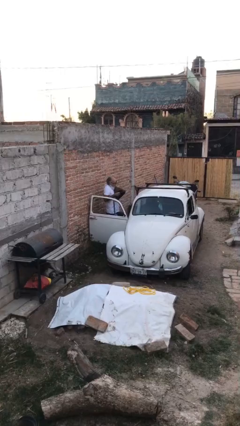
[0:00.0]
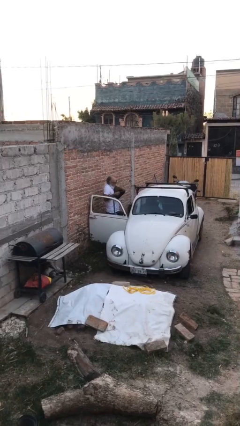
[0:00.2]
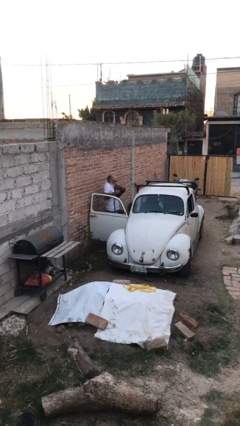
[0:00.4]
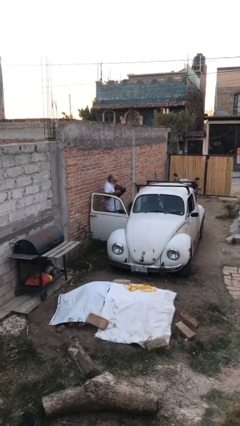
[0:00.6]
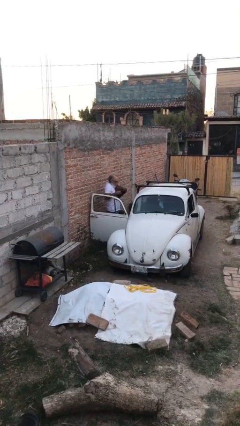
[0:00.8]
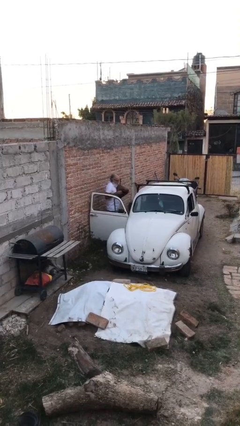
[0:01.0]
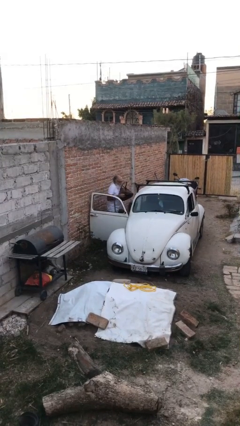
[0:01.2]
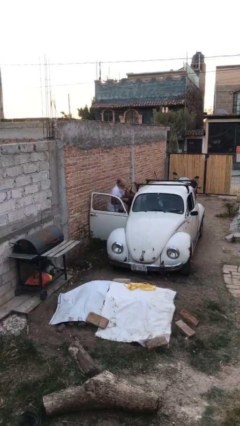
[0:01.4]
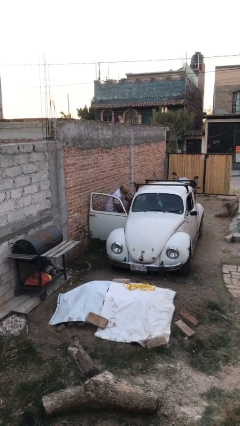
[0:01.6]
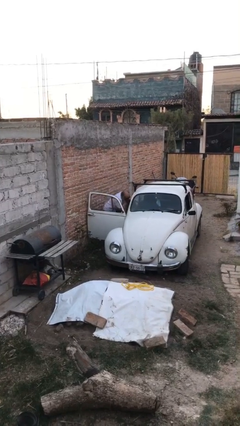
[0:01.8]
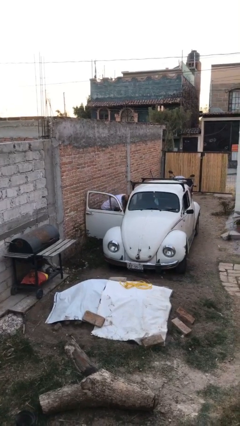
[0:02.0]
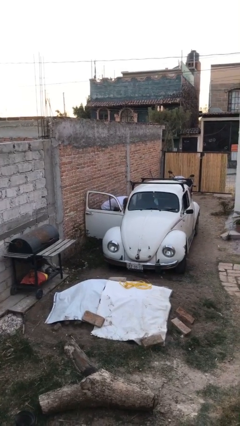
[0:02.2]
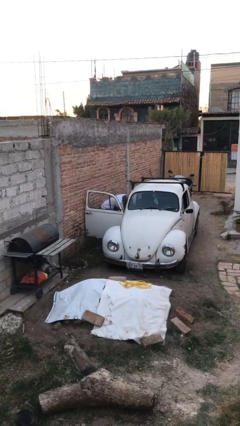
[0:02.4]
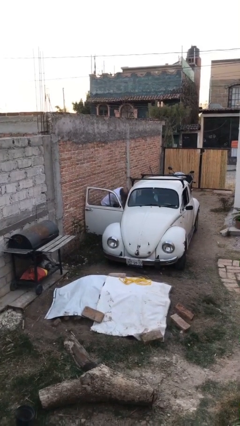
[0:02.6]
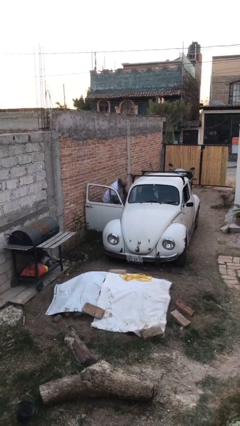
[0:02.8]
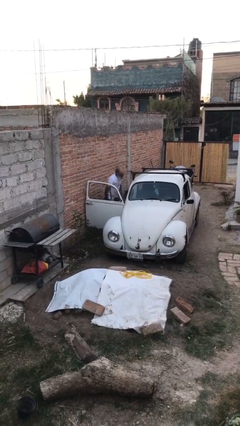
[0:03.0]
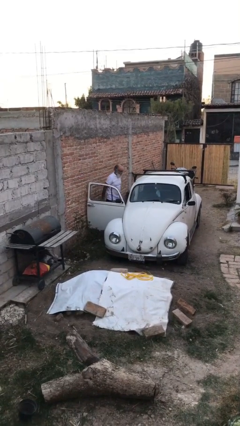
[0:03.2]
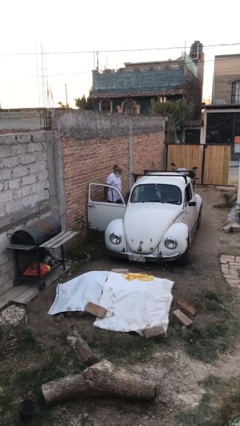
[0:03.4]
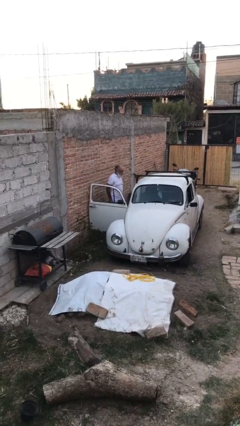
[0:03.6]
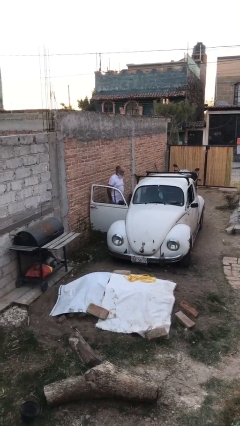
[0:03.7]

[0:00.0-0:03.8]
person loads car

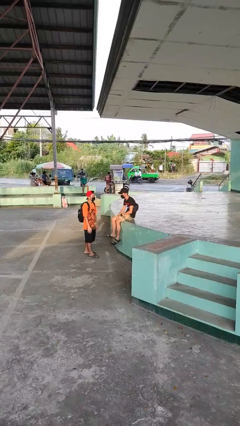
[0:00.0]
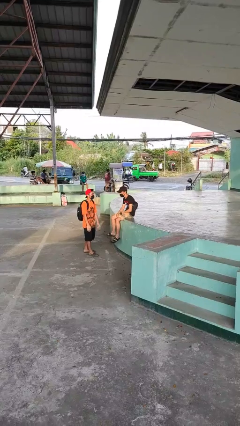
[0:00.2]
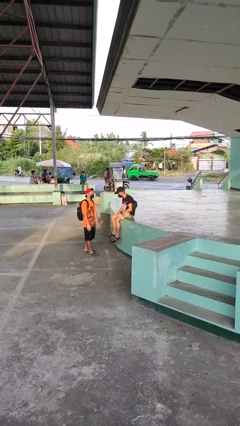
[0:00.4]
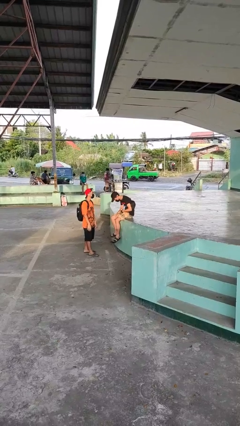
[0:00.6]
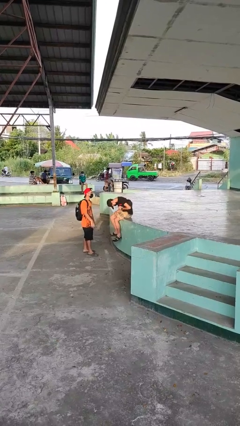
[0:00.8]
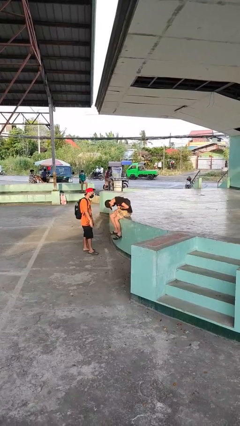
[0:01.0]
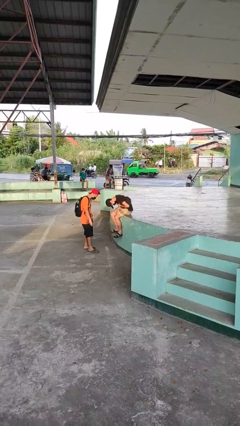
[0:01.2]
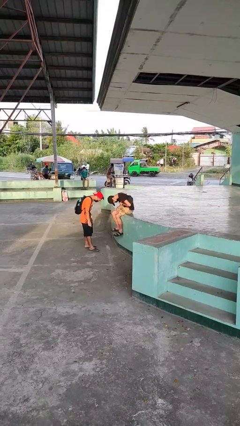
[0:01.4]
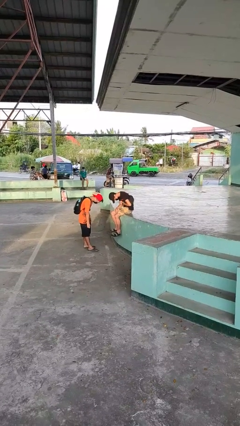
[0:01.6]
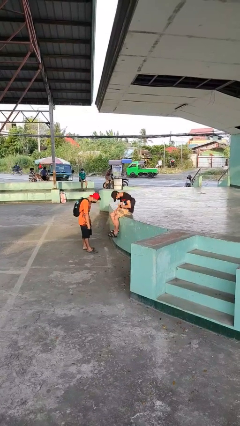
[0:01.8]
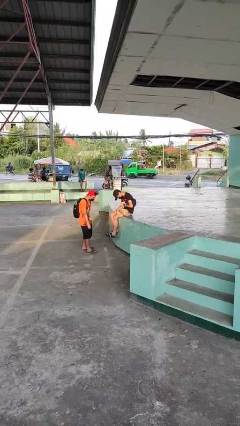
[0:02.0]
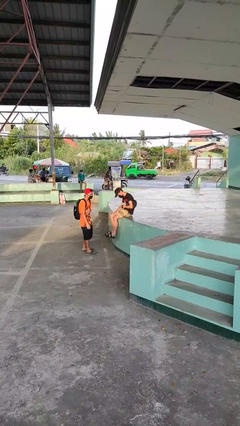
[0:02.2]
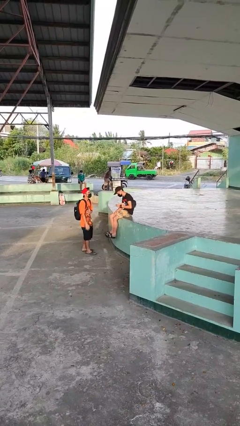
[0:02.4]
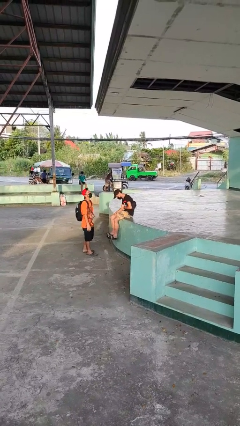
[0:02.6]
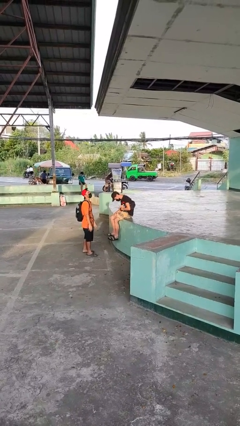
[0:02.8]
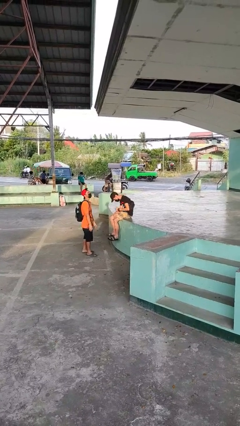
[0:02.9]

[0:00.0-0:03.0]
person laughs with person

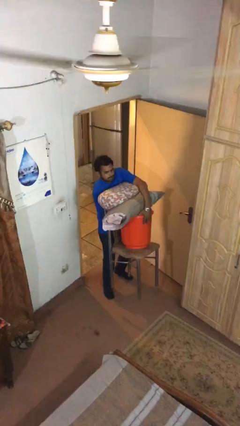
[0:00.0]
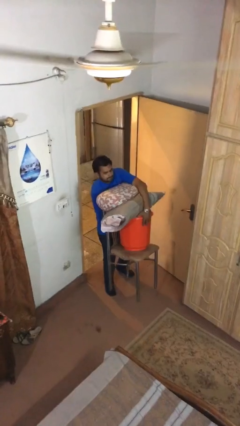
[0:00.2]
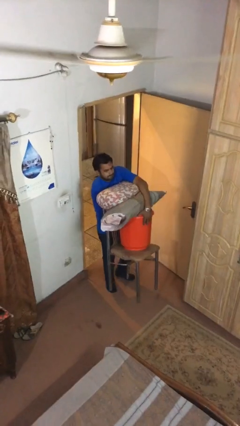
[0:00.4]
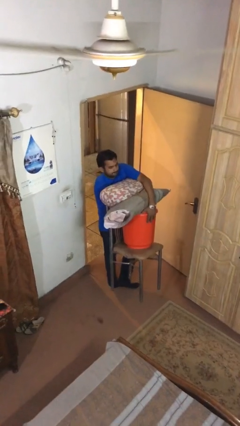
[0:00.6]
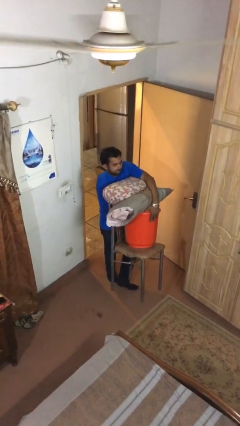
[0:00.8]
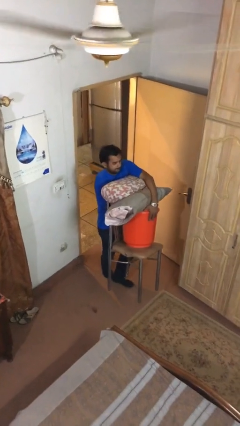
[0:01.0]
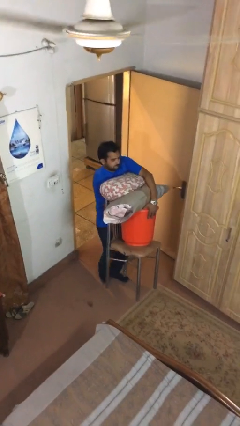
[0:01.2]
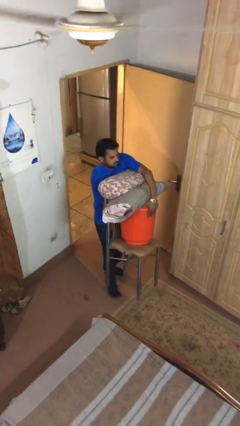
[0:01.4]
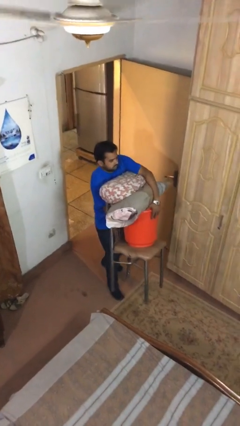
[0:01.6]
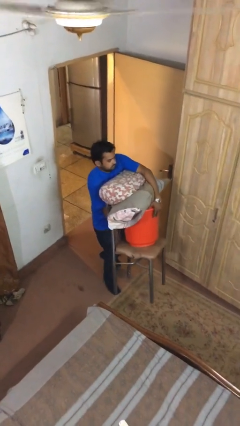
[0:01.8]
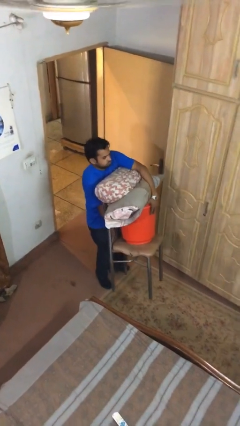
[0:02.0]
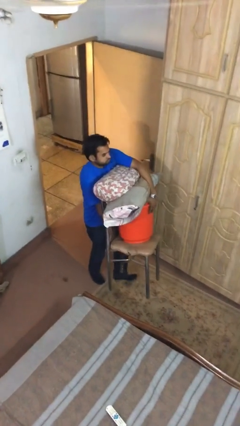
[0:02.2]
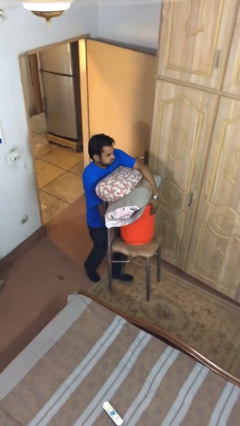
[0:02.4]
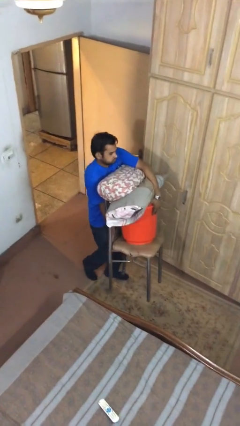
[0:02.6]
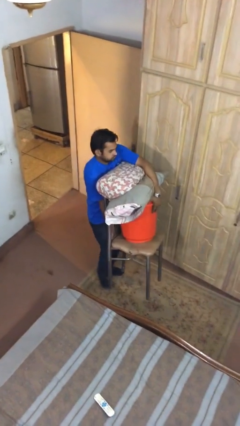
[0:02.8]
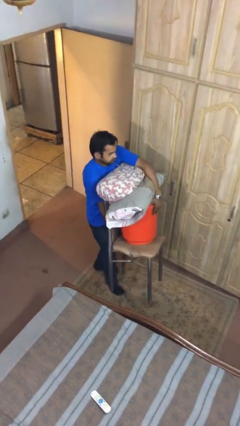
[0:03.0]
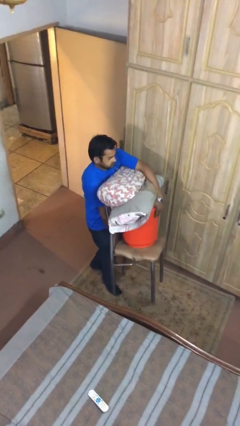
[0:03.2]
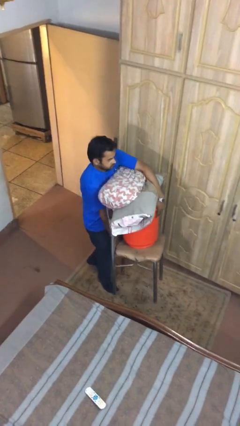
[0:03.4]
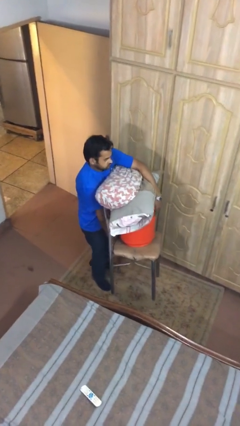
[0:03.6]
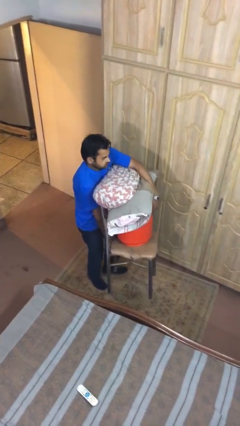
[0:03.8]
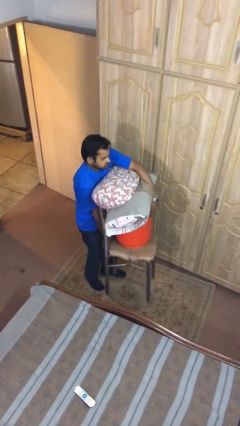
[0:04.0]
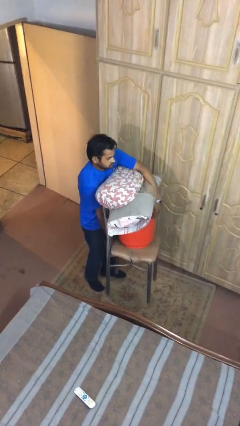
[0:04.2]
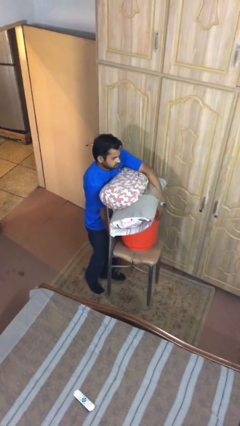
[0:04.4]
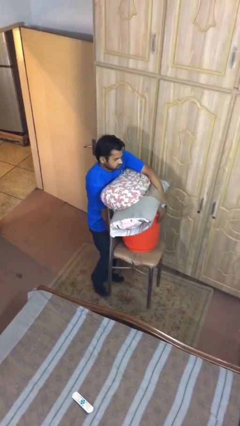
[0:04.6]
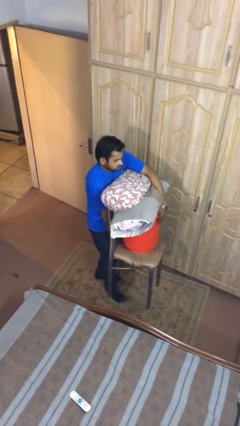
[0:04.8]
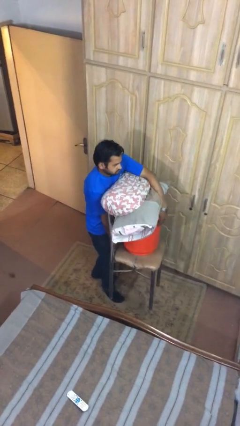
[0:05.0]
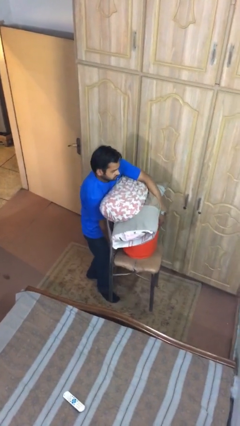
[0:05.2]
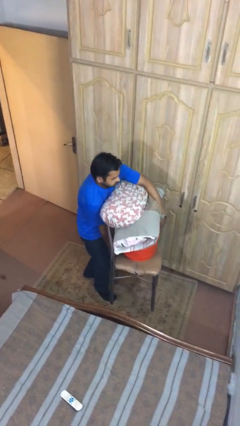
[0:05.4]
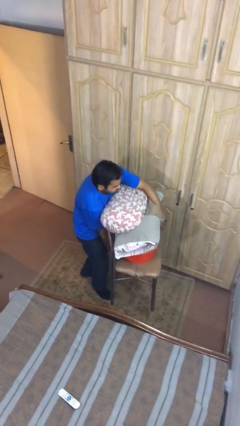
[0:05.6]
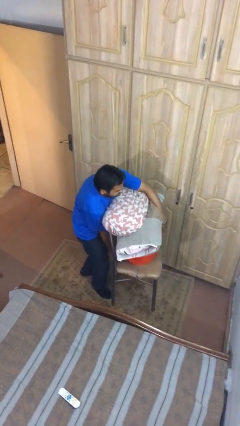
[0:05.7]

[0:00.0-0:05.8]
person carries heavy object

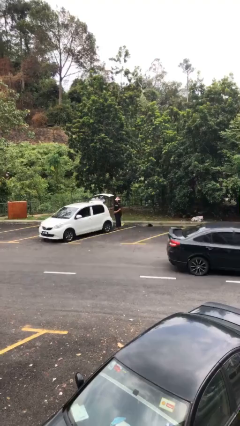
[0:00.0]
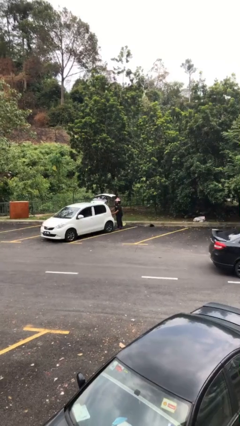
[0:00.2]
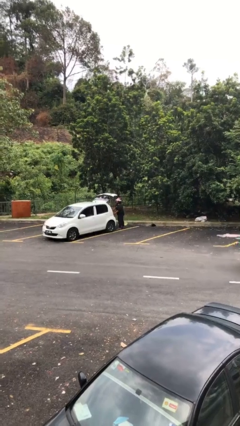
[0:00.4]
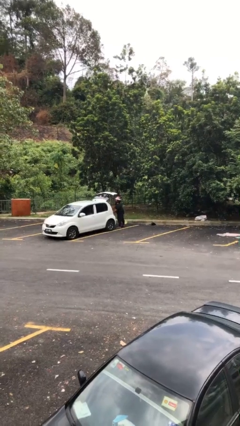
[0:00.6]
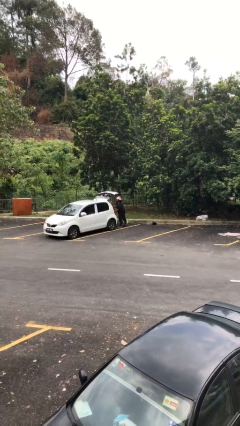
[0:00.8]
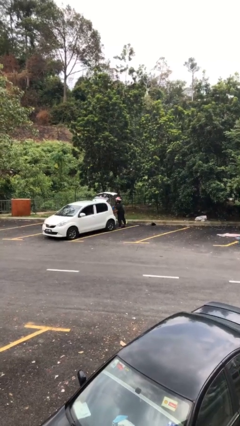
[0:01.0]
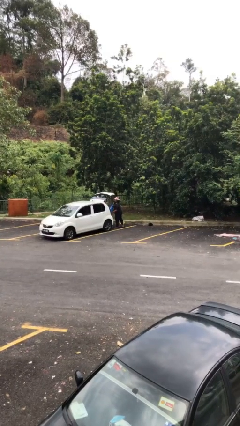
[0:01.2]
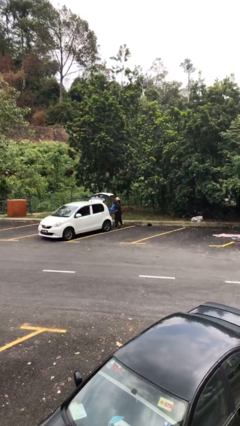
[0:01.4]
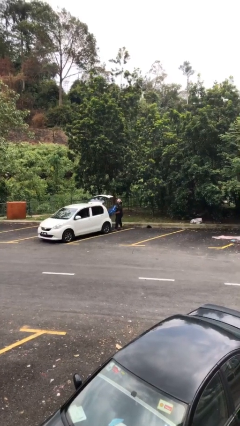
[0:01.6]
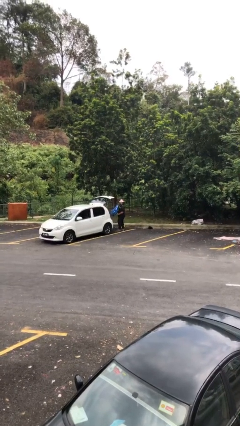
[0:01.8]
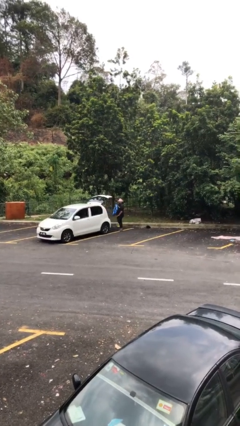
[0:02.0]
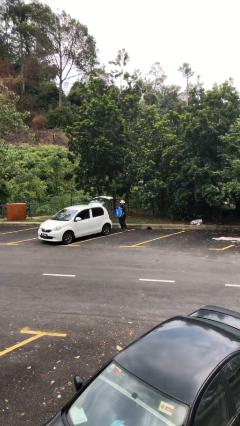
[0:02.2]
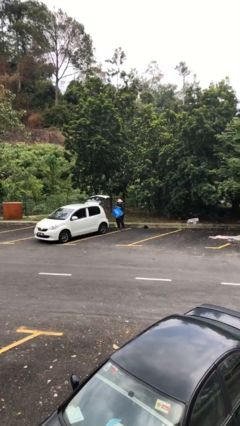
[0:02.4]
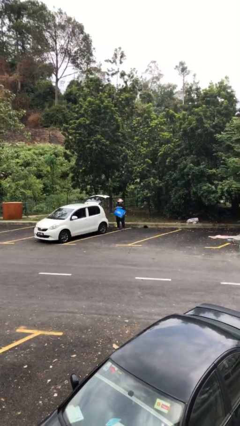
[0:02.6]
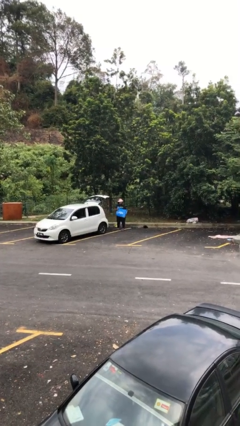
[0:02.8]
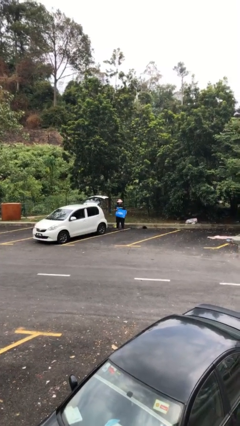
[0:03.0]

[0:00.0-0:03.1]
person unloads car

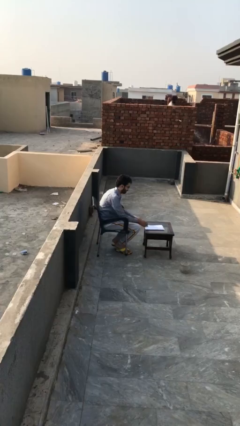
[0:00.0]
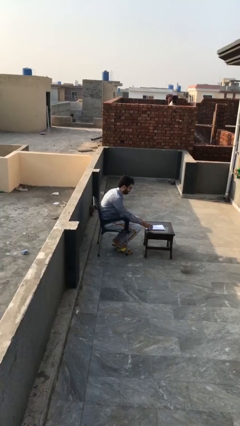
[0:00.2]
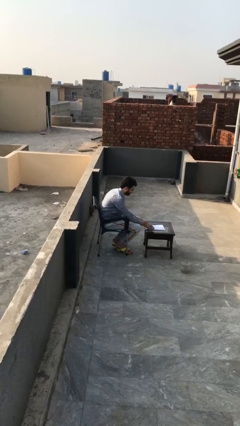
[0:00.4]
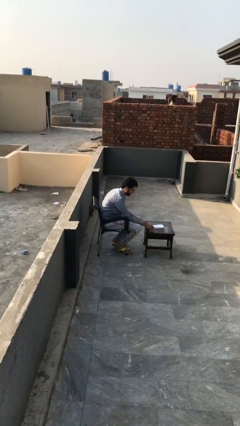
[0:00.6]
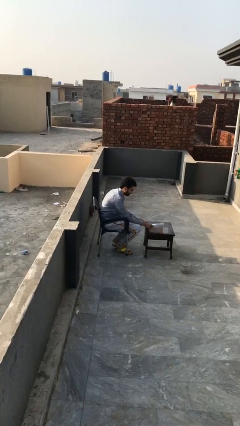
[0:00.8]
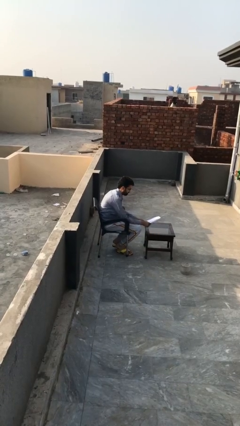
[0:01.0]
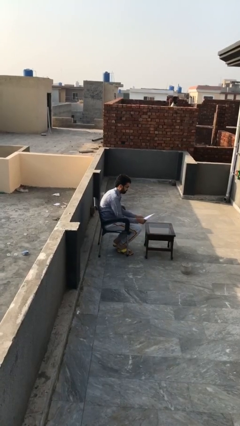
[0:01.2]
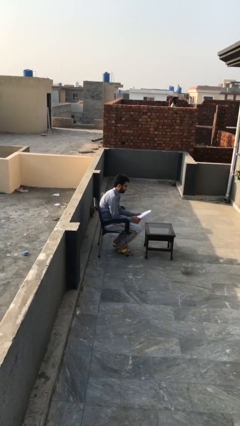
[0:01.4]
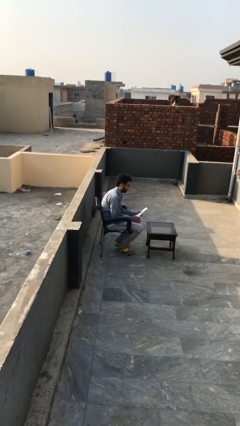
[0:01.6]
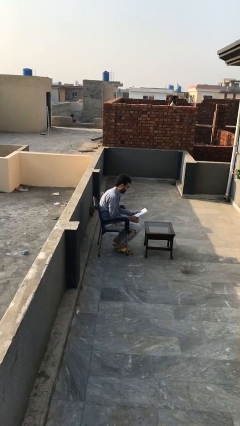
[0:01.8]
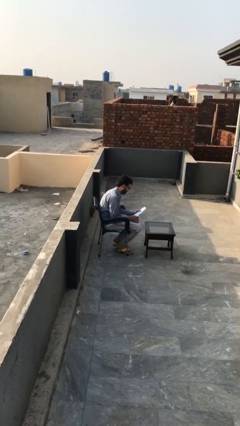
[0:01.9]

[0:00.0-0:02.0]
person picks up object from table
